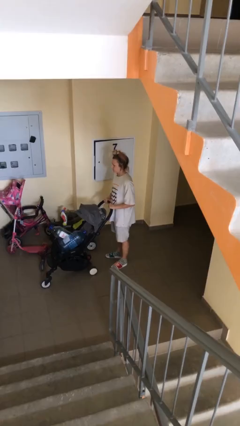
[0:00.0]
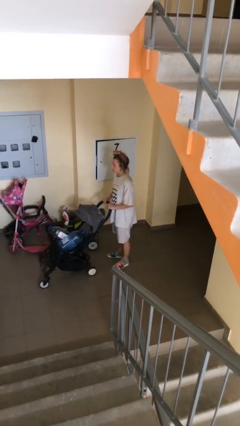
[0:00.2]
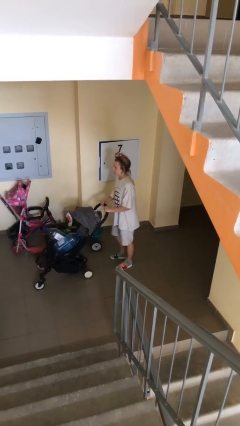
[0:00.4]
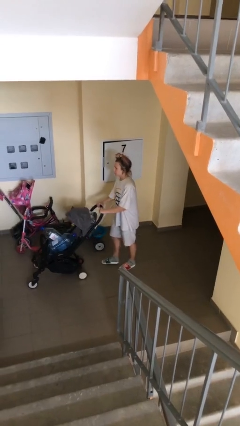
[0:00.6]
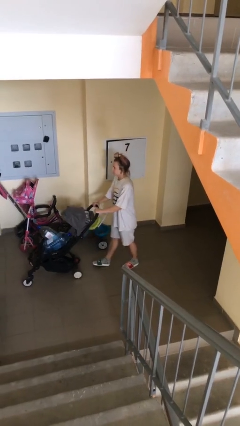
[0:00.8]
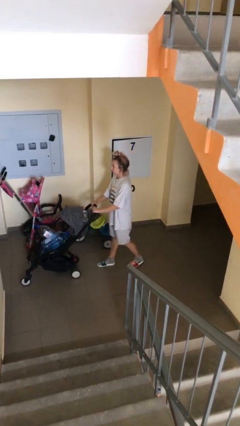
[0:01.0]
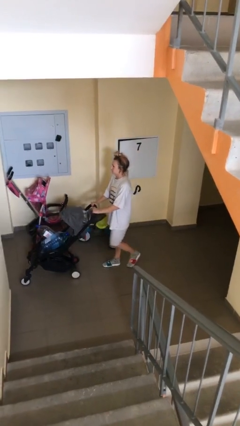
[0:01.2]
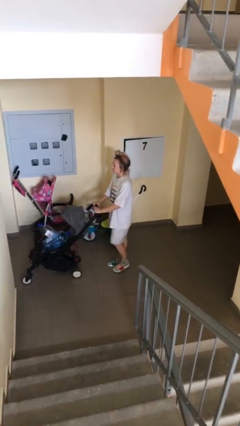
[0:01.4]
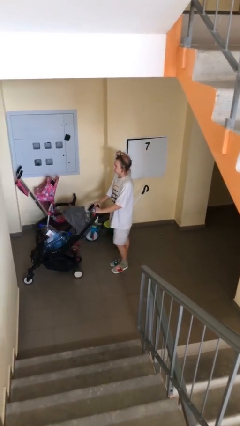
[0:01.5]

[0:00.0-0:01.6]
person pushes wheeled cart

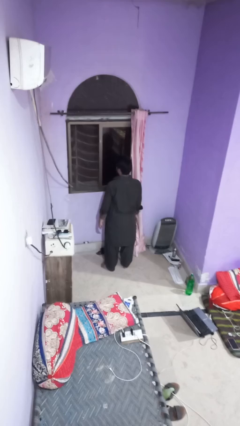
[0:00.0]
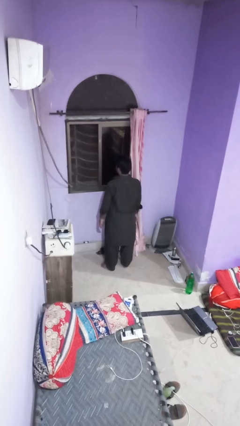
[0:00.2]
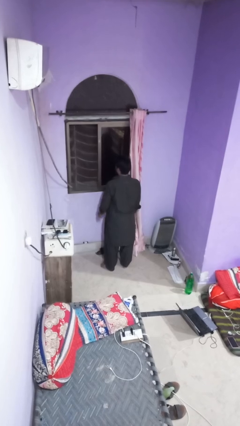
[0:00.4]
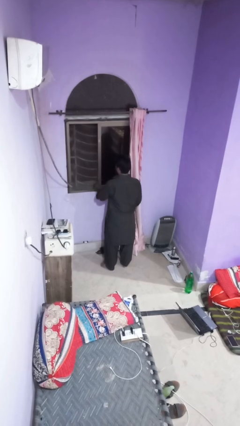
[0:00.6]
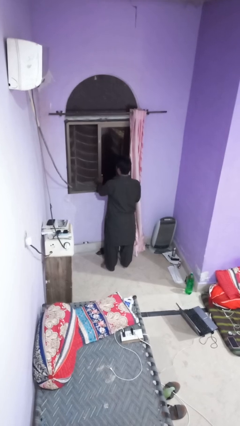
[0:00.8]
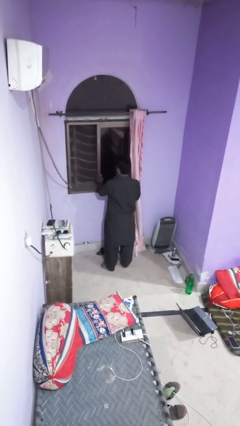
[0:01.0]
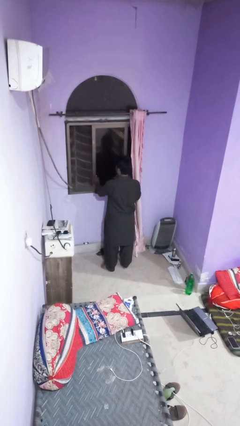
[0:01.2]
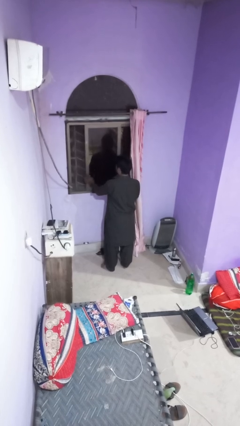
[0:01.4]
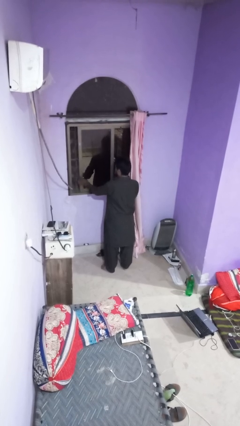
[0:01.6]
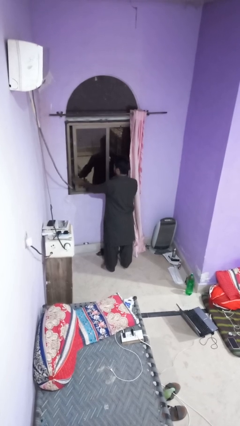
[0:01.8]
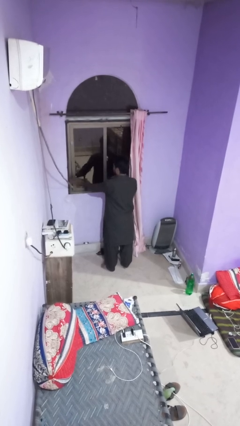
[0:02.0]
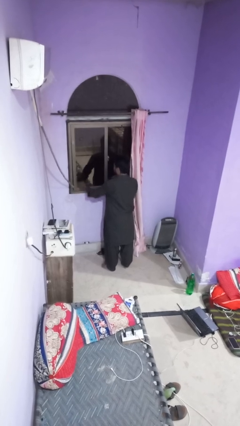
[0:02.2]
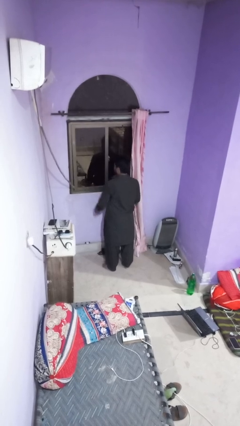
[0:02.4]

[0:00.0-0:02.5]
person closes home window

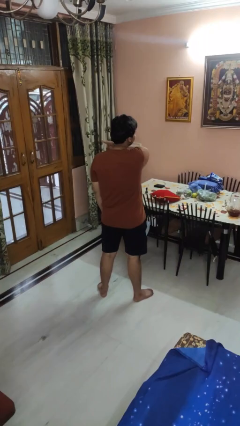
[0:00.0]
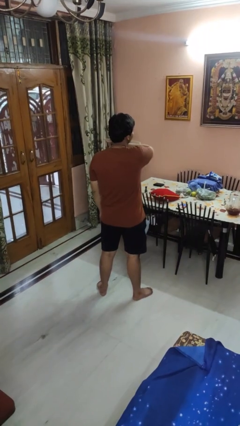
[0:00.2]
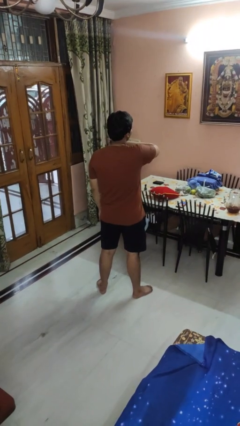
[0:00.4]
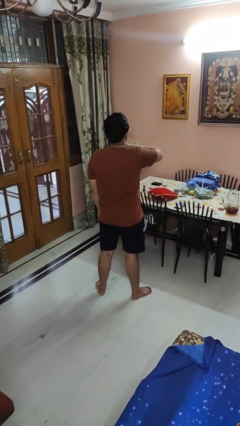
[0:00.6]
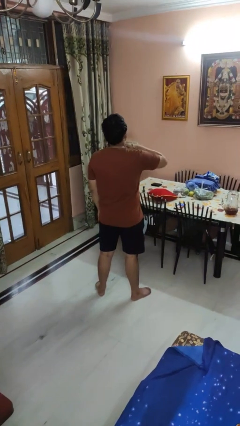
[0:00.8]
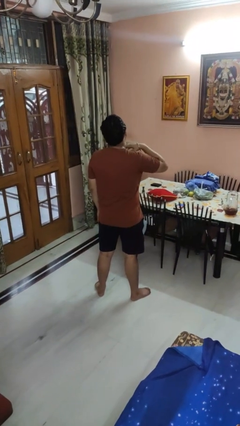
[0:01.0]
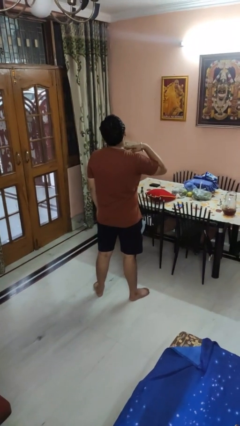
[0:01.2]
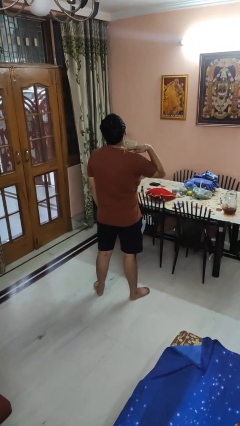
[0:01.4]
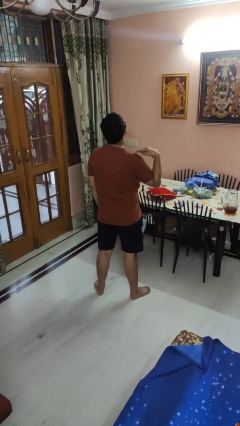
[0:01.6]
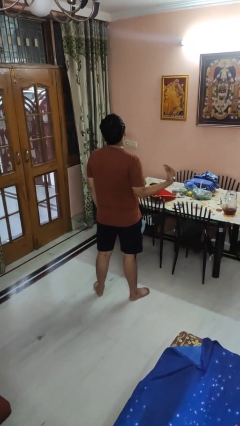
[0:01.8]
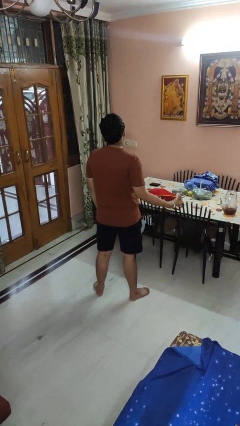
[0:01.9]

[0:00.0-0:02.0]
person gestures cut

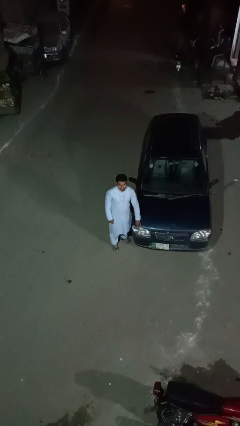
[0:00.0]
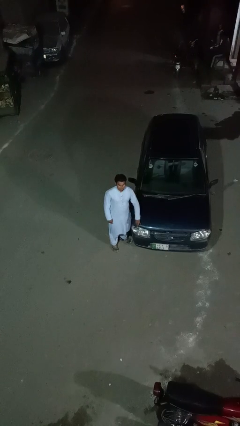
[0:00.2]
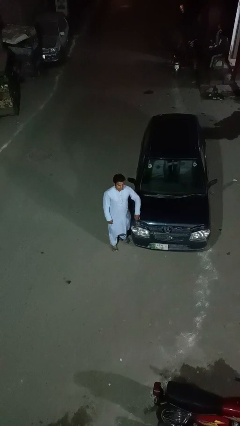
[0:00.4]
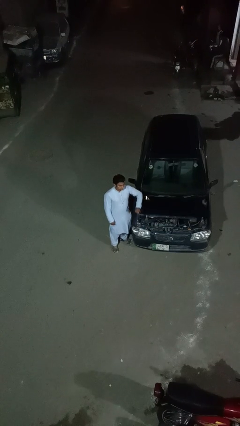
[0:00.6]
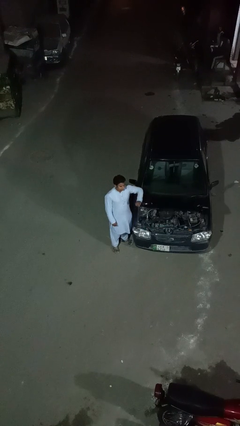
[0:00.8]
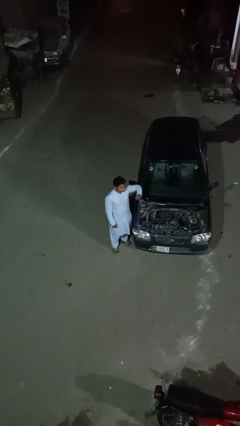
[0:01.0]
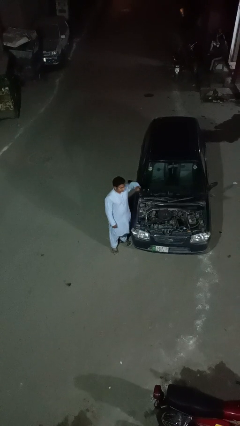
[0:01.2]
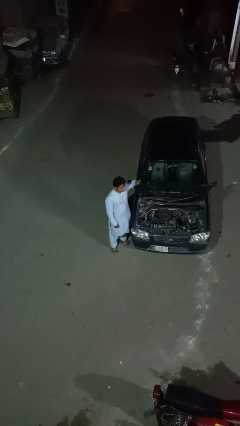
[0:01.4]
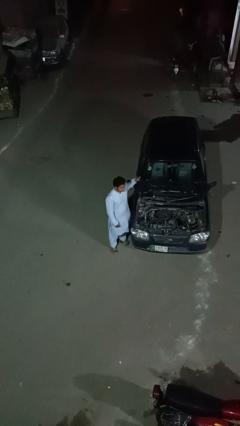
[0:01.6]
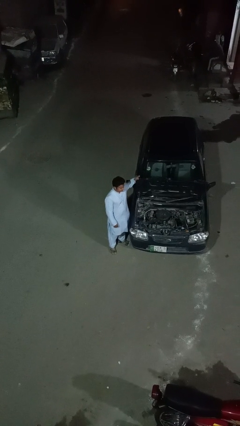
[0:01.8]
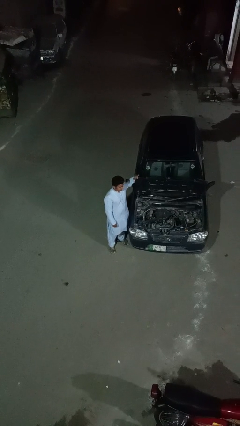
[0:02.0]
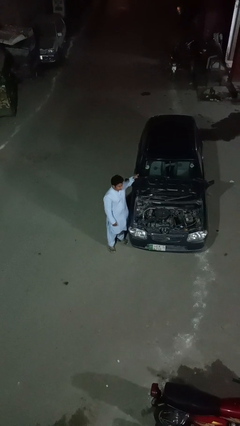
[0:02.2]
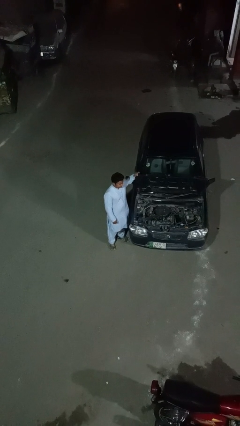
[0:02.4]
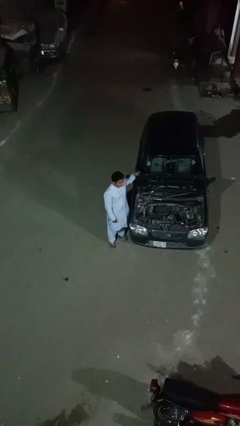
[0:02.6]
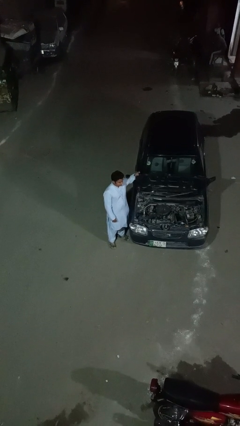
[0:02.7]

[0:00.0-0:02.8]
person opens car hood

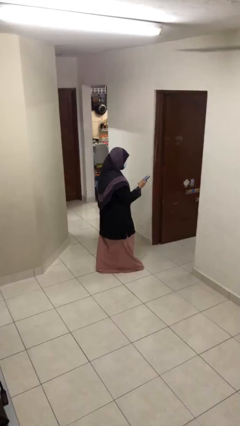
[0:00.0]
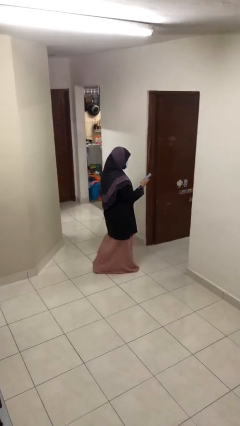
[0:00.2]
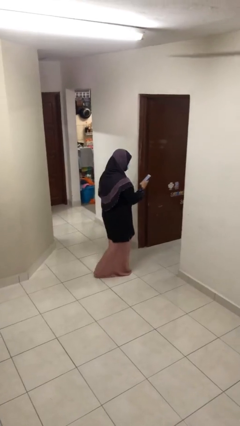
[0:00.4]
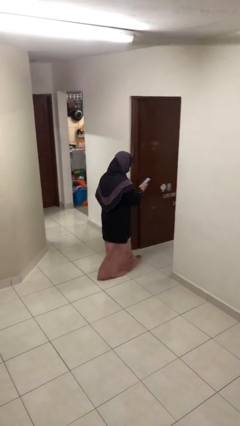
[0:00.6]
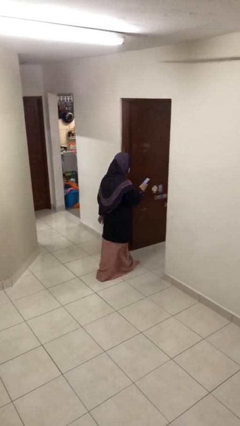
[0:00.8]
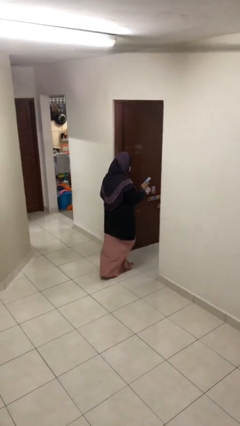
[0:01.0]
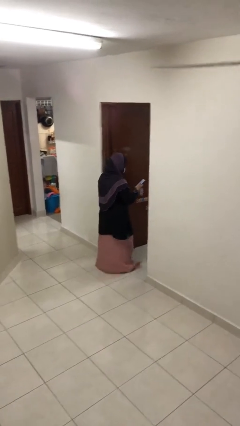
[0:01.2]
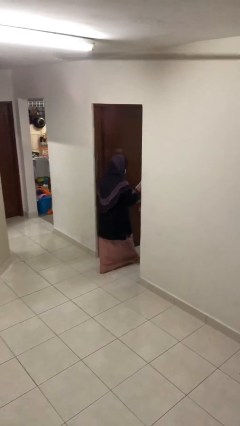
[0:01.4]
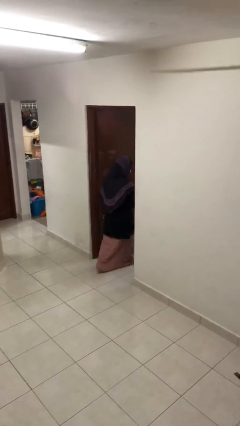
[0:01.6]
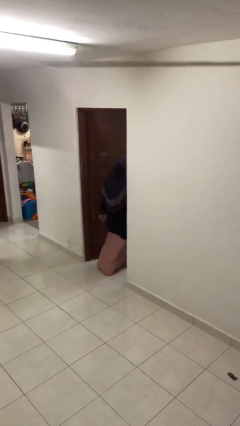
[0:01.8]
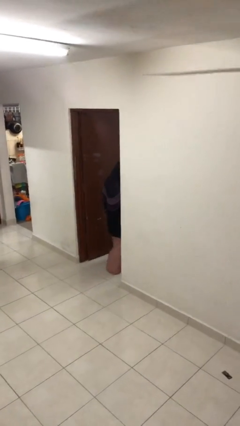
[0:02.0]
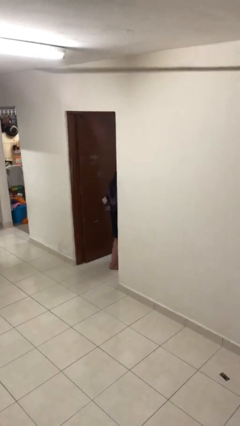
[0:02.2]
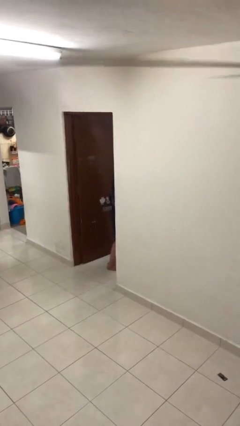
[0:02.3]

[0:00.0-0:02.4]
person enters scene through structure

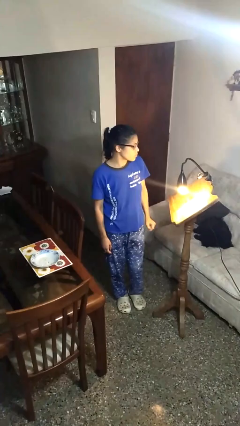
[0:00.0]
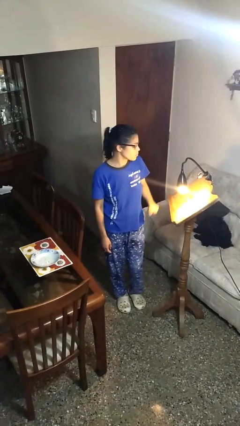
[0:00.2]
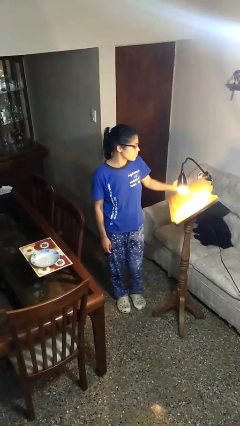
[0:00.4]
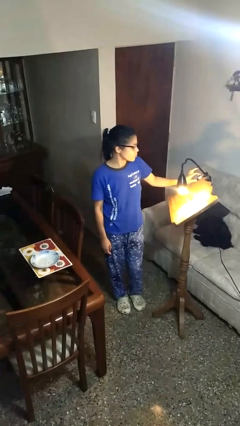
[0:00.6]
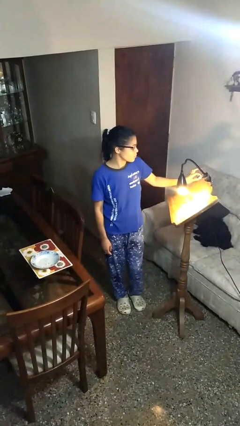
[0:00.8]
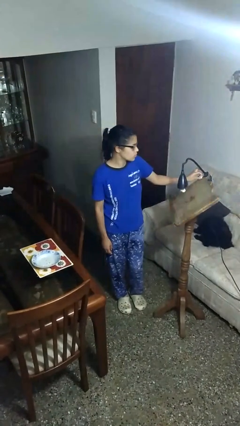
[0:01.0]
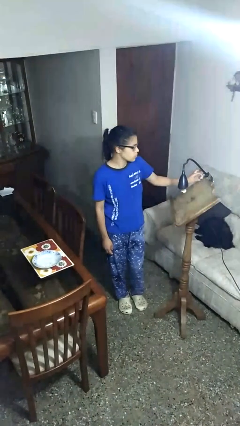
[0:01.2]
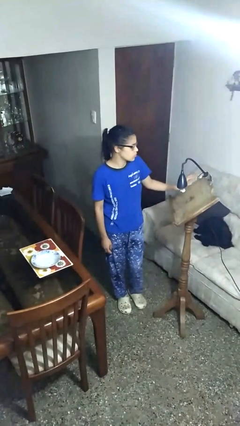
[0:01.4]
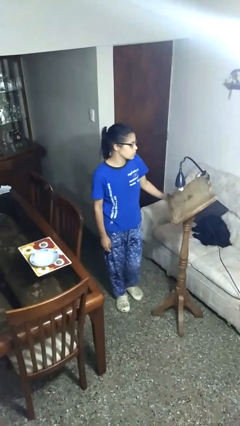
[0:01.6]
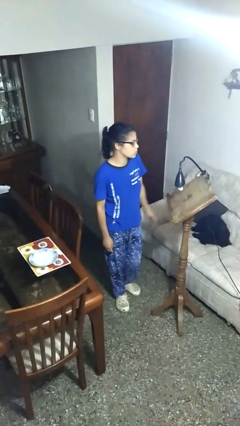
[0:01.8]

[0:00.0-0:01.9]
person turns off lamp

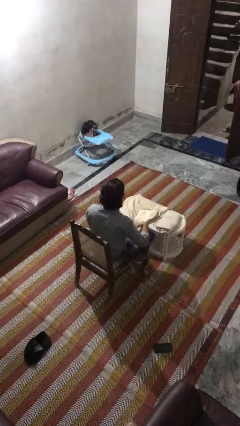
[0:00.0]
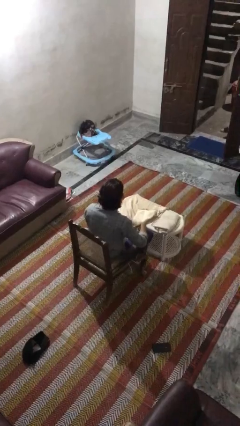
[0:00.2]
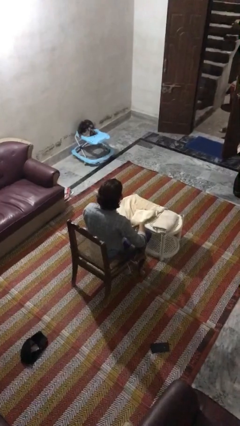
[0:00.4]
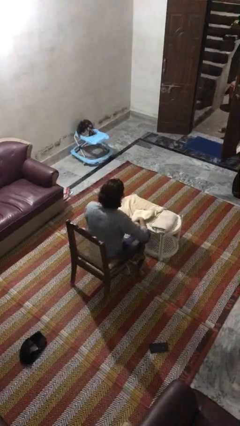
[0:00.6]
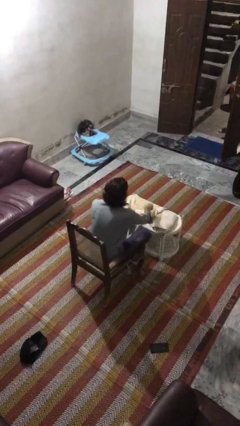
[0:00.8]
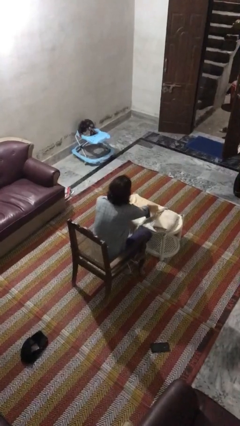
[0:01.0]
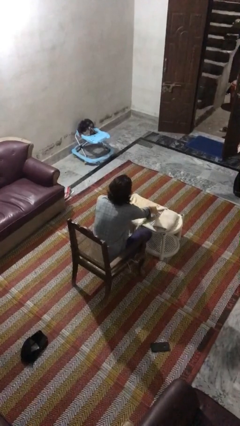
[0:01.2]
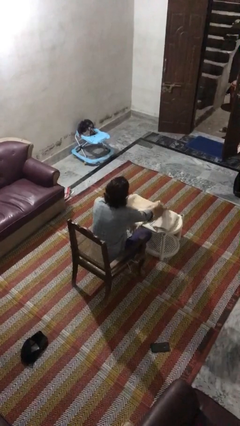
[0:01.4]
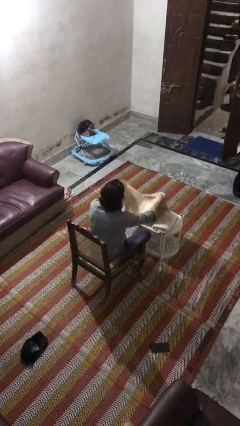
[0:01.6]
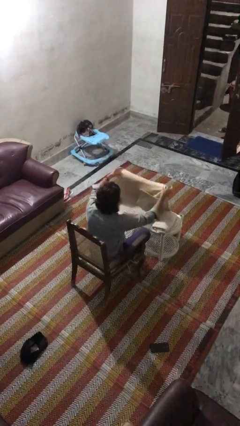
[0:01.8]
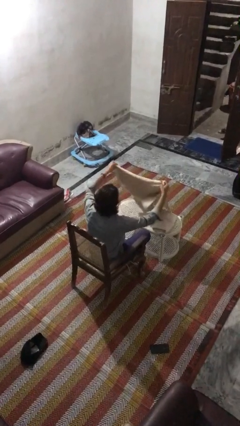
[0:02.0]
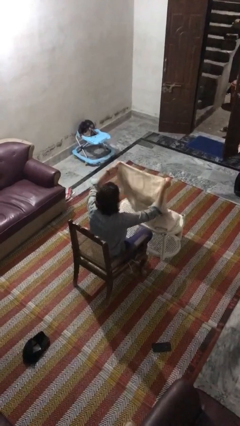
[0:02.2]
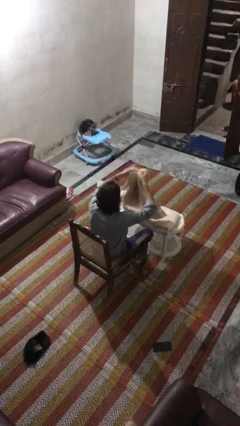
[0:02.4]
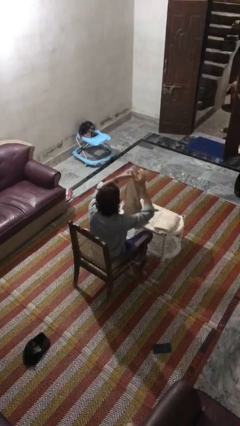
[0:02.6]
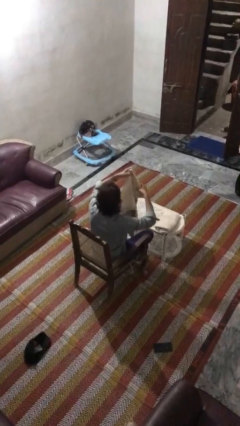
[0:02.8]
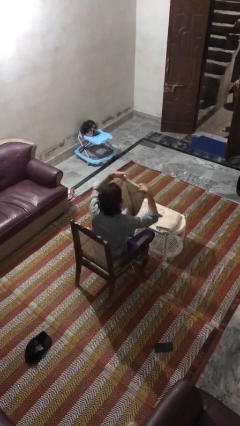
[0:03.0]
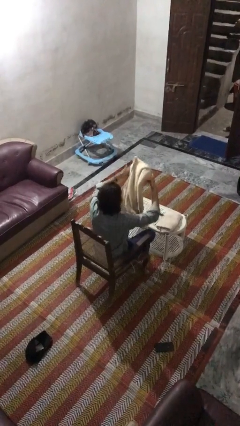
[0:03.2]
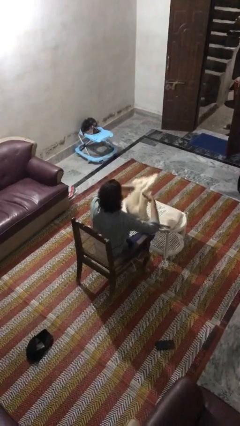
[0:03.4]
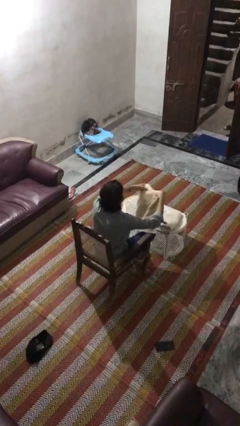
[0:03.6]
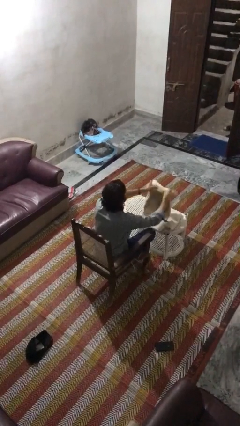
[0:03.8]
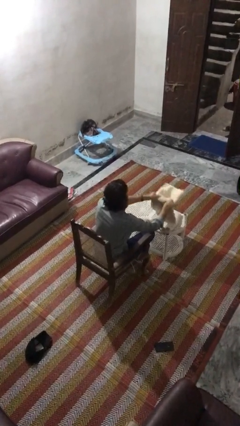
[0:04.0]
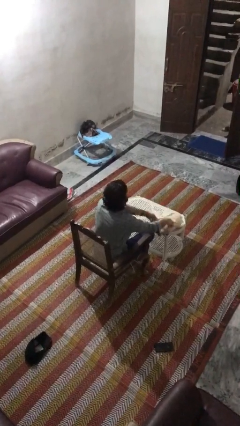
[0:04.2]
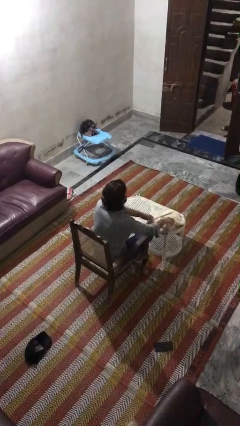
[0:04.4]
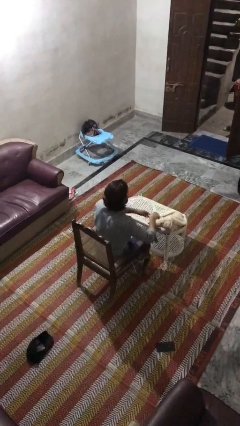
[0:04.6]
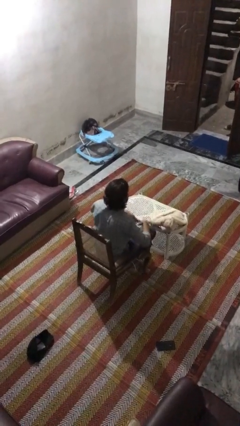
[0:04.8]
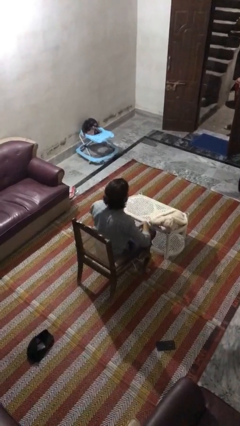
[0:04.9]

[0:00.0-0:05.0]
person folds towel
